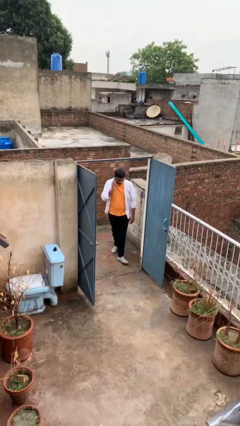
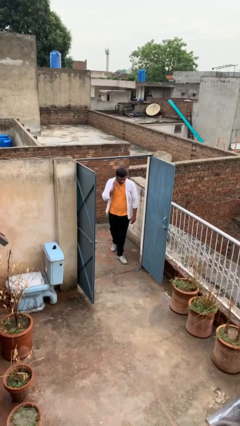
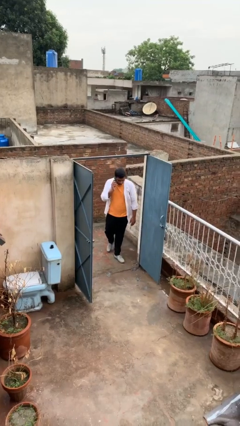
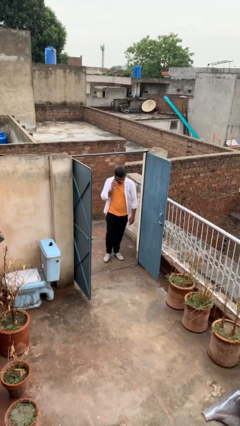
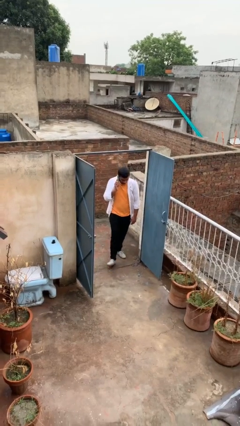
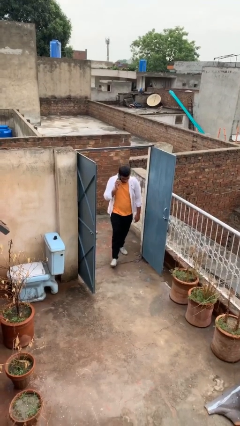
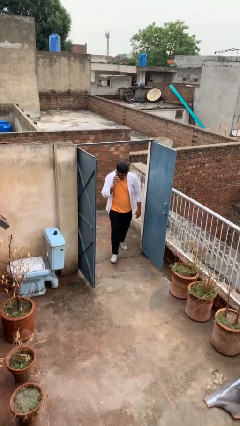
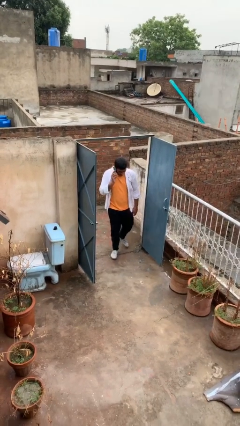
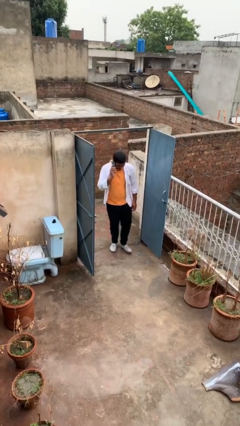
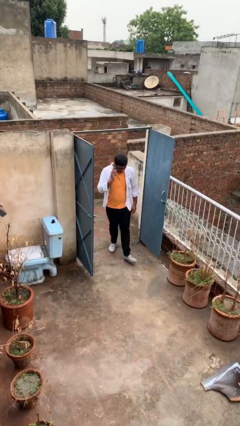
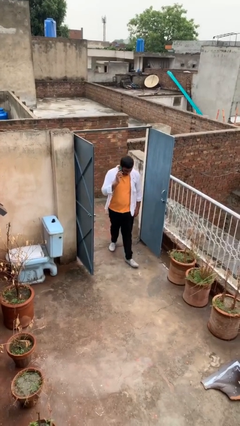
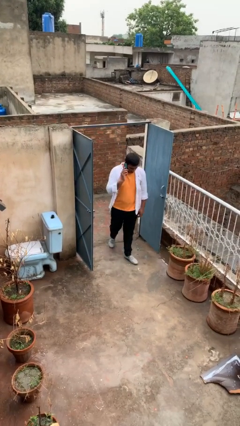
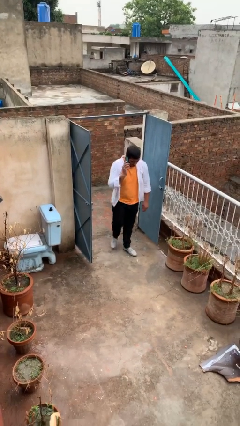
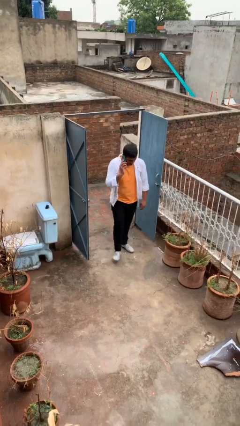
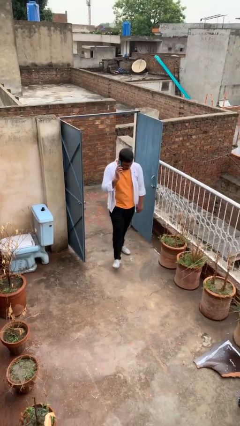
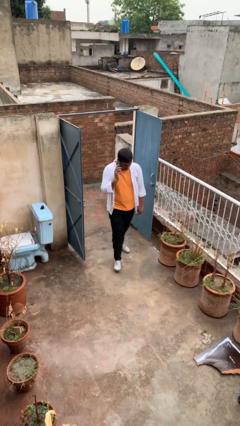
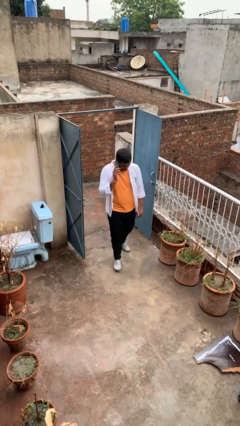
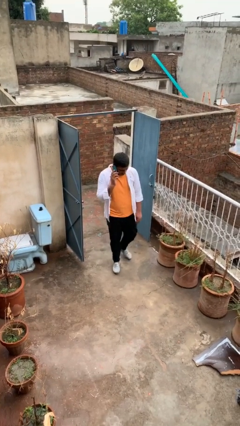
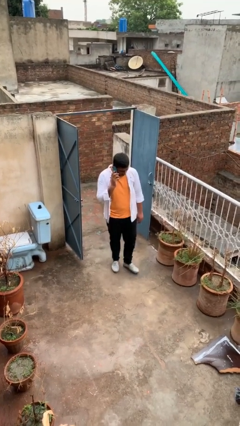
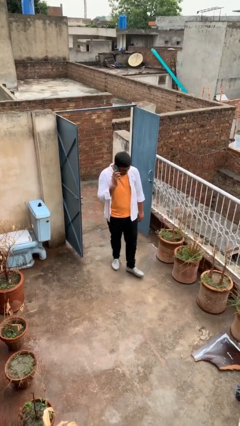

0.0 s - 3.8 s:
person enters scene through structure

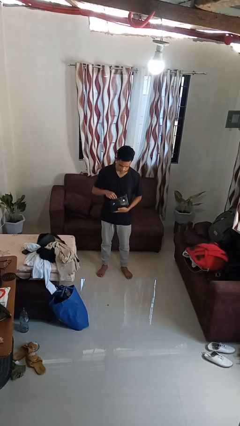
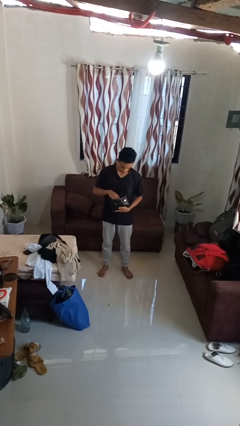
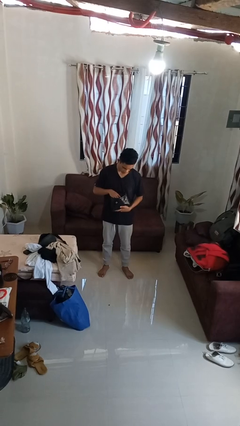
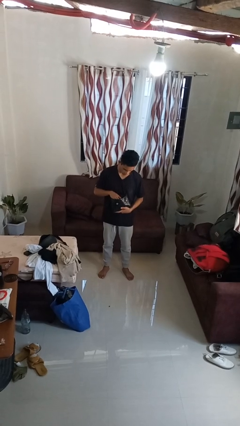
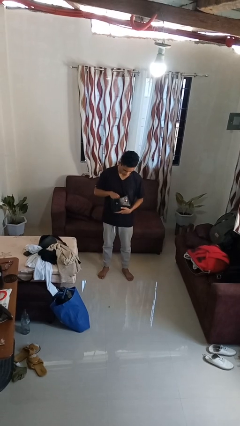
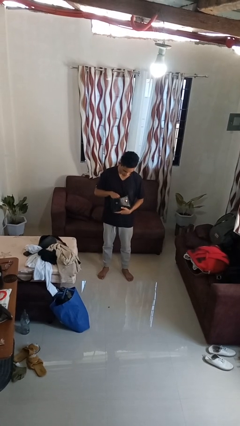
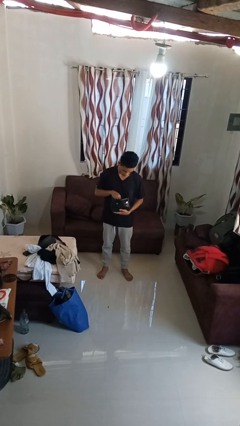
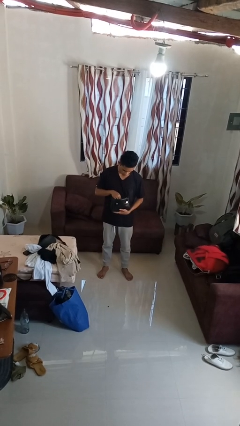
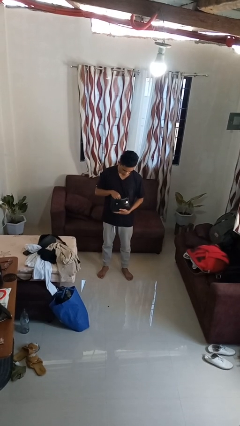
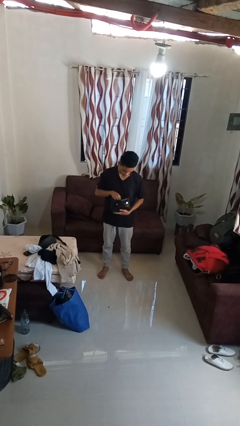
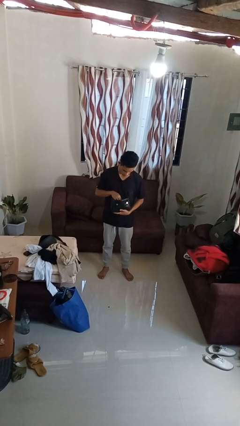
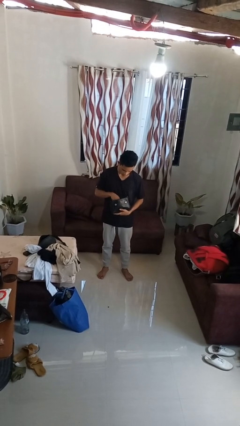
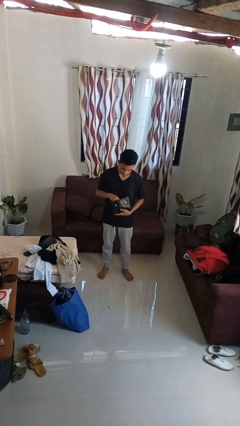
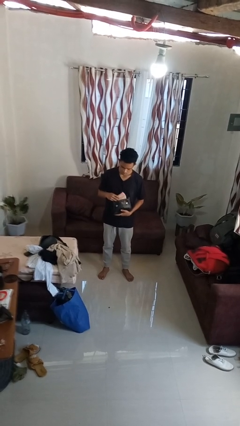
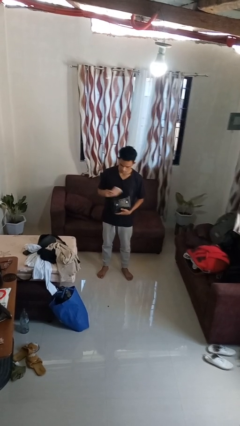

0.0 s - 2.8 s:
person searches in purse

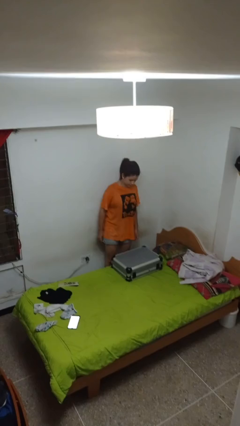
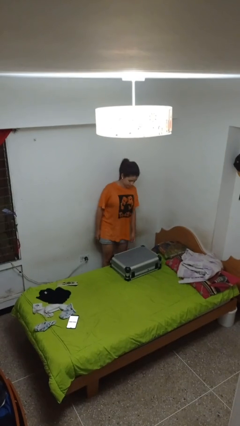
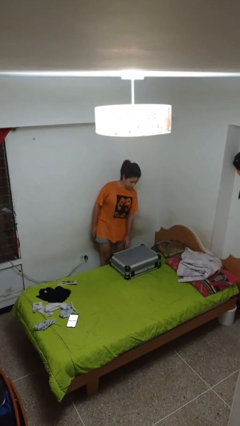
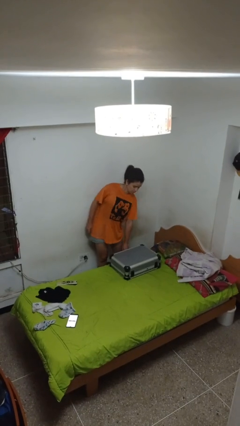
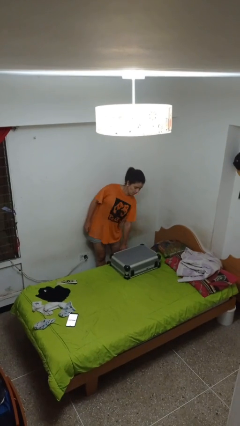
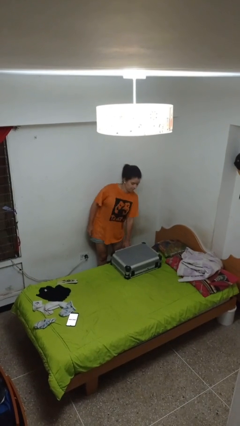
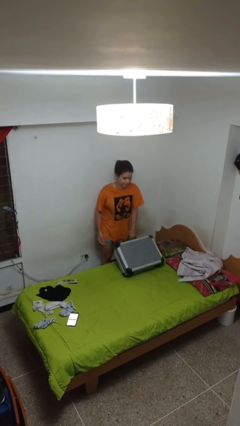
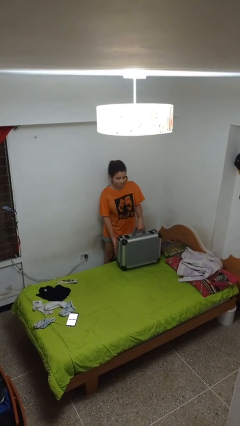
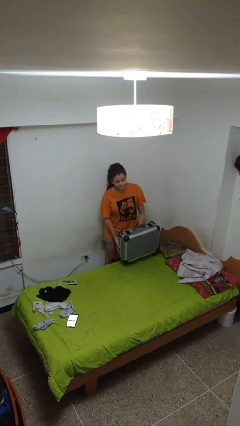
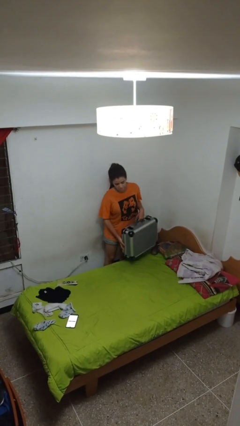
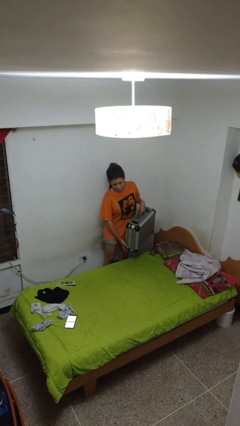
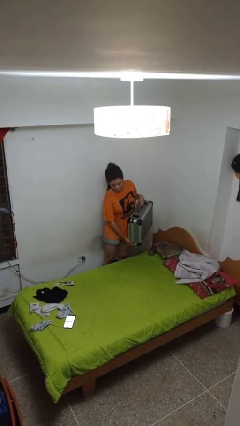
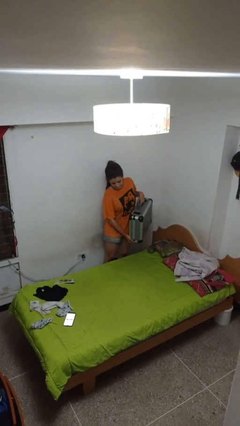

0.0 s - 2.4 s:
person picks up object from bed

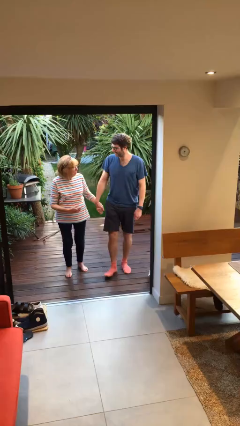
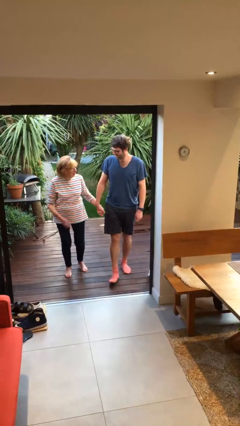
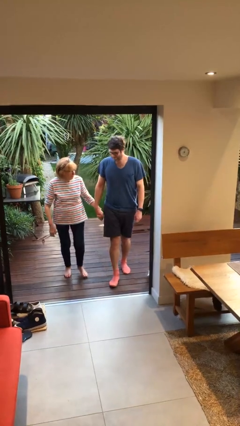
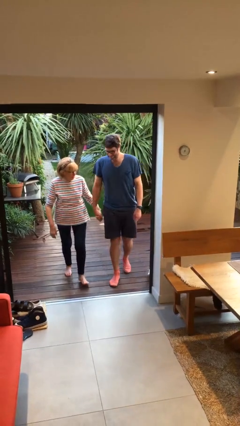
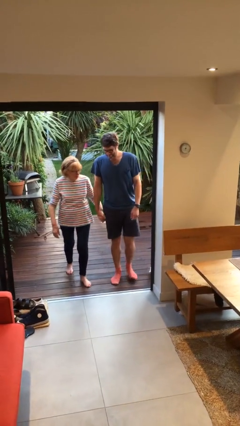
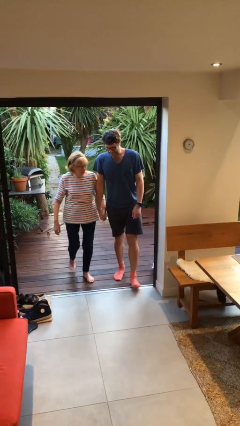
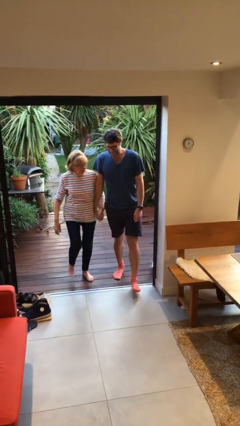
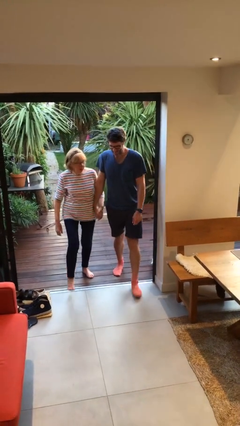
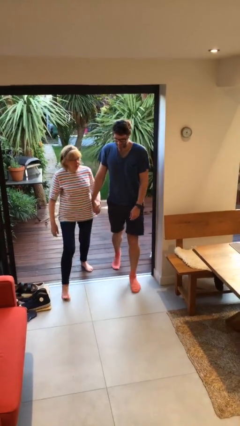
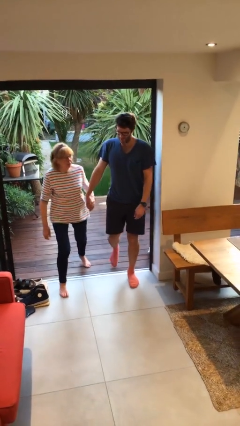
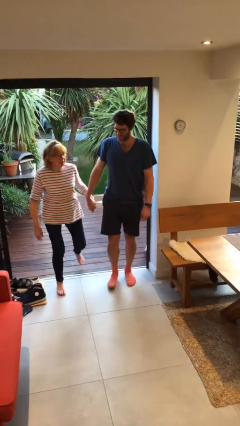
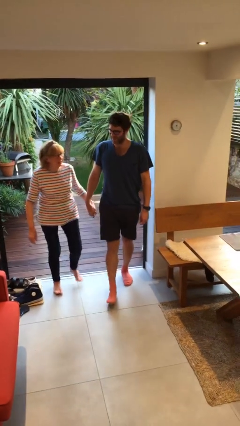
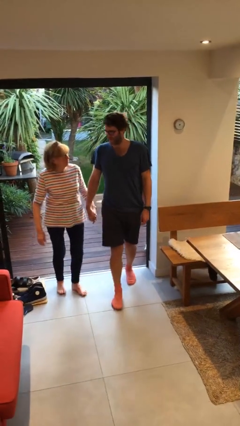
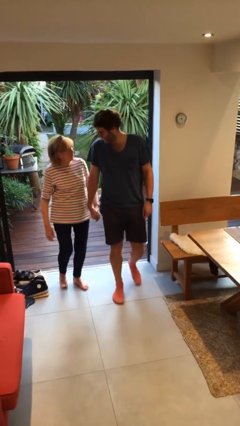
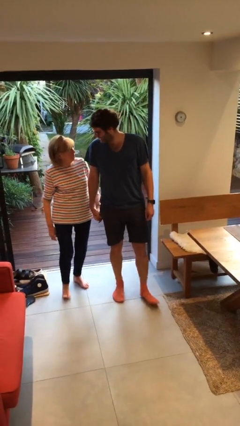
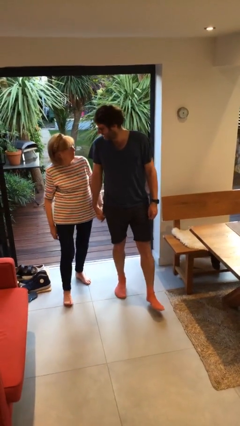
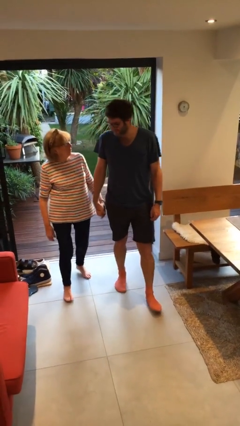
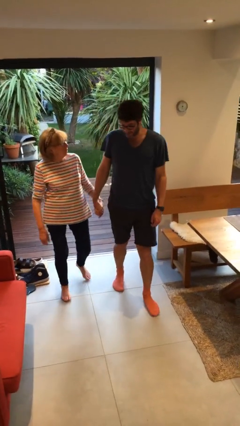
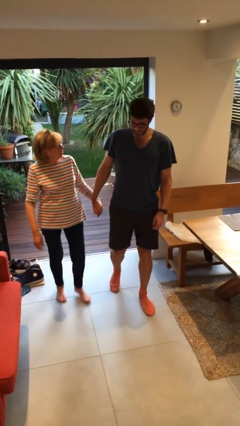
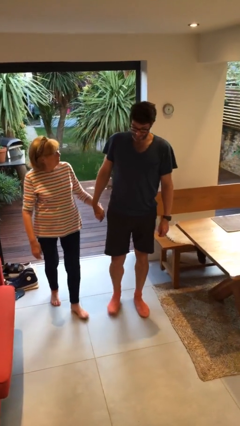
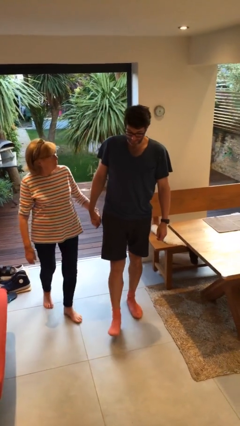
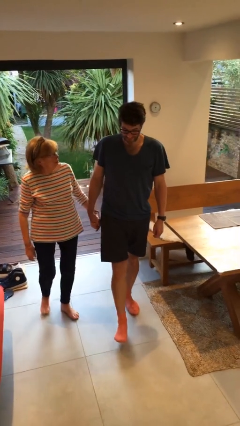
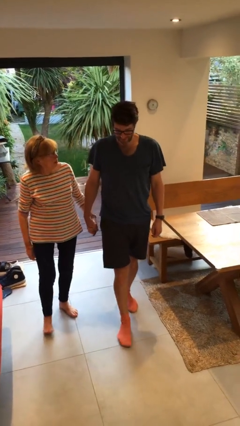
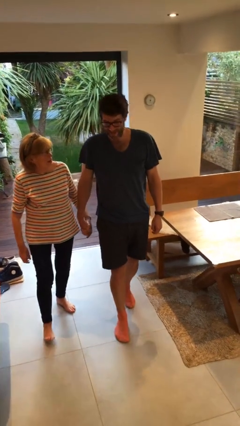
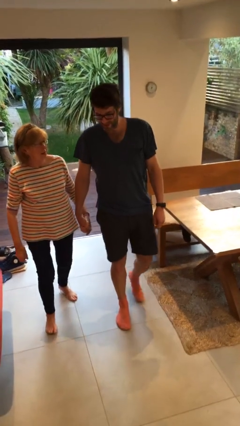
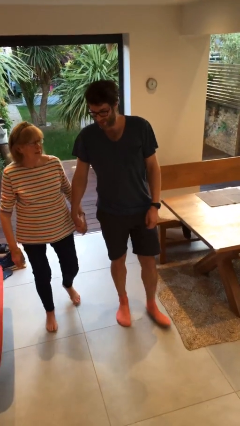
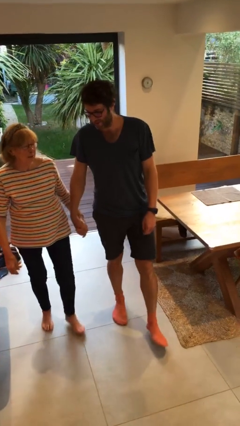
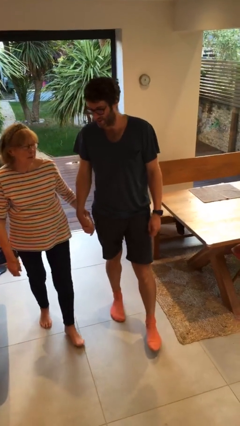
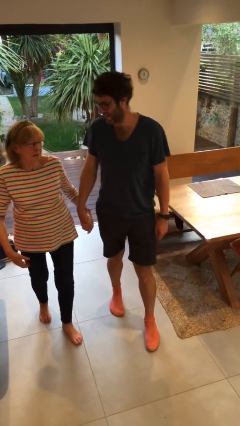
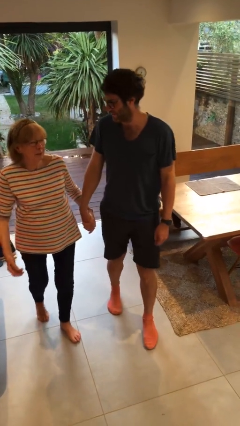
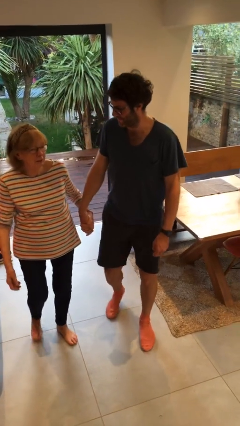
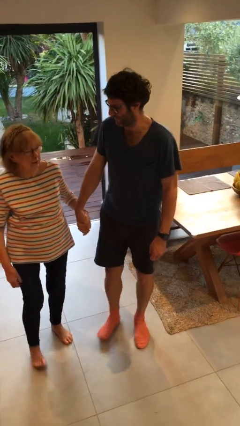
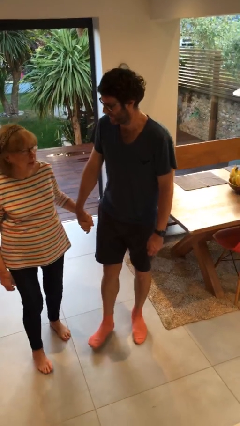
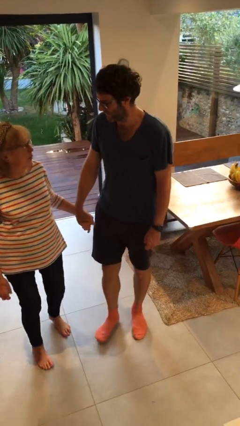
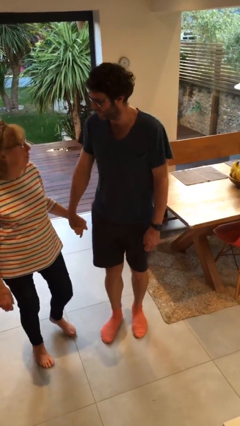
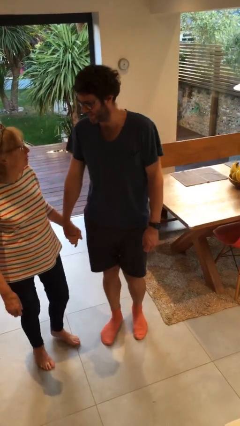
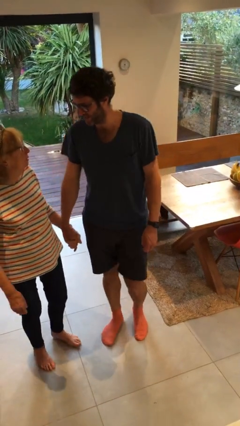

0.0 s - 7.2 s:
person holds hand

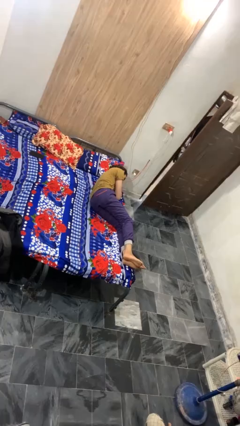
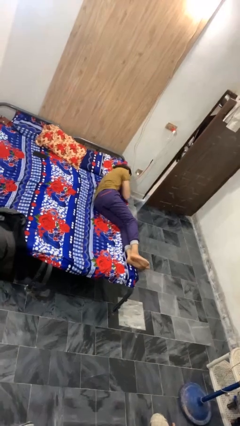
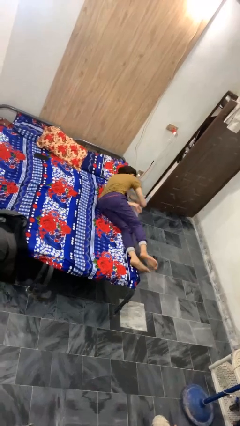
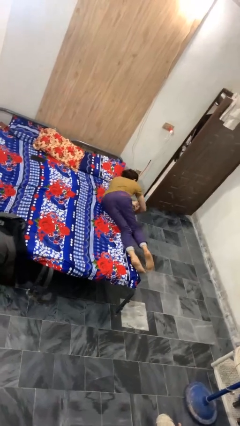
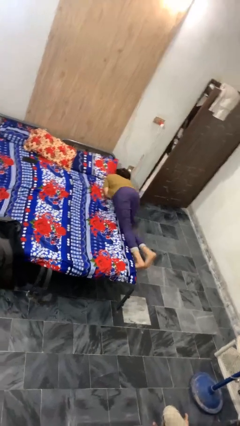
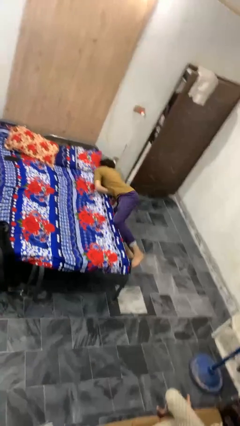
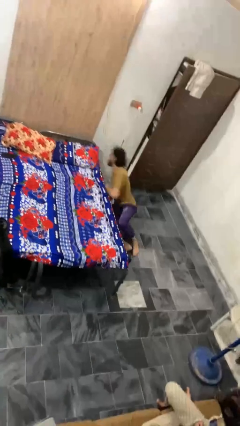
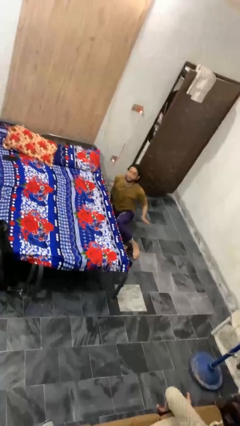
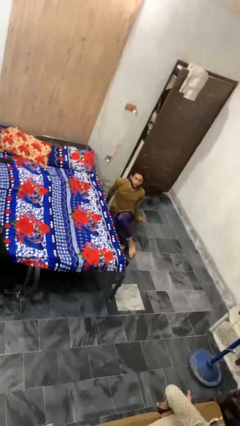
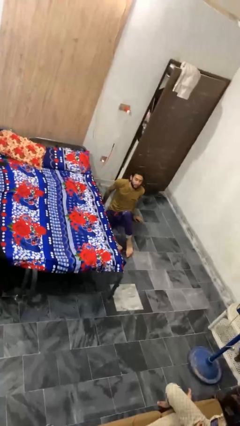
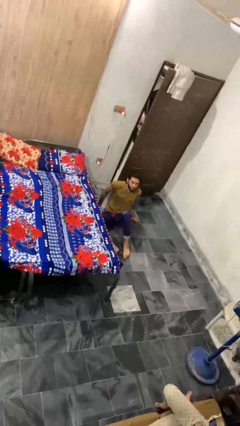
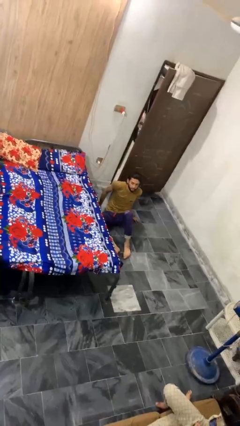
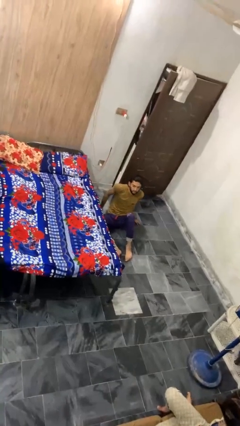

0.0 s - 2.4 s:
person falls from bed
